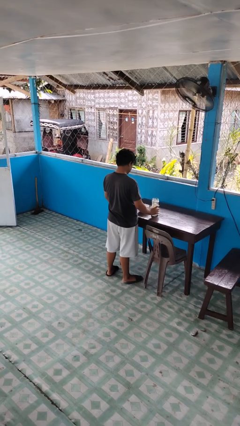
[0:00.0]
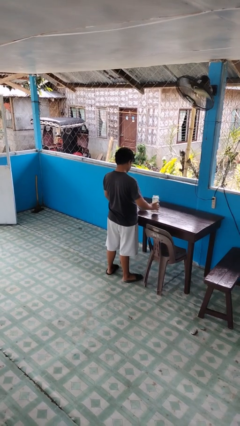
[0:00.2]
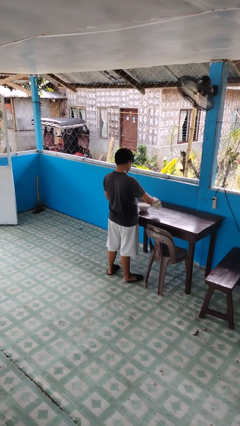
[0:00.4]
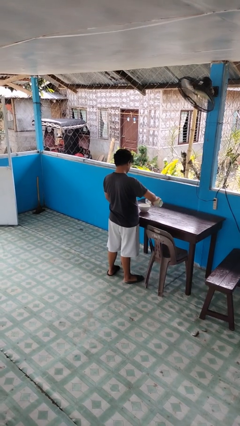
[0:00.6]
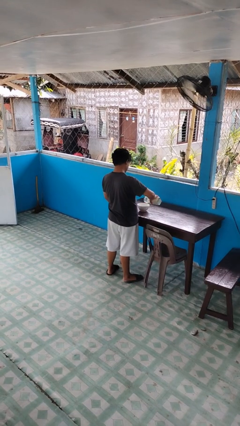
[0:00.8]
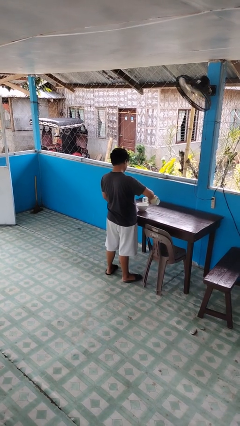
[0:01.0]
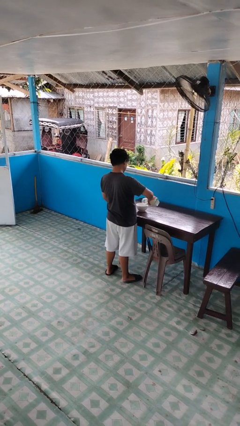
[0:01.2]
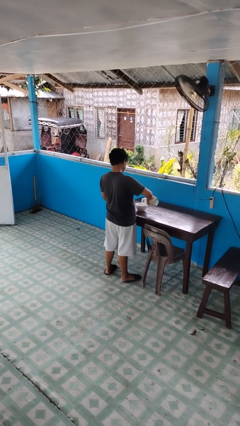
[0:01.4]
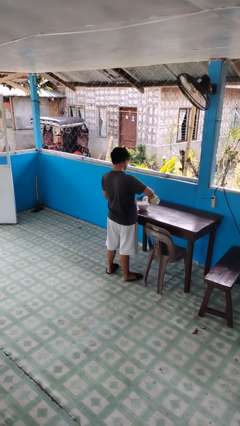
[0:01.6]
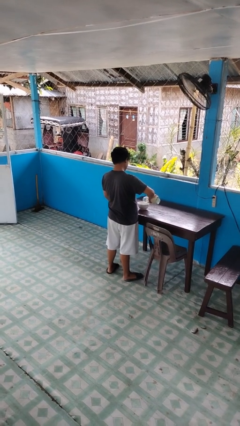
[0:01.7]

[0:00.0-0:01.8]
person pours into bowl

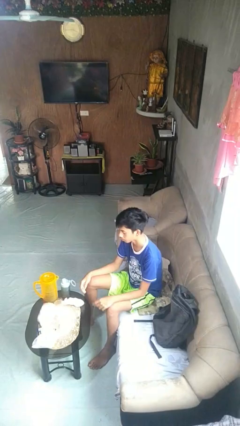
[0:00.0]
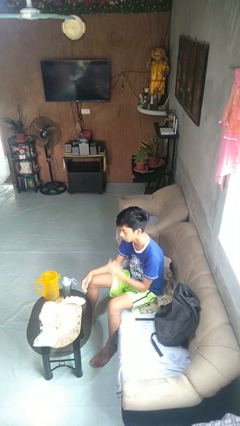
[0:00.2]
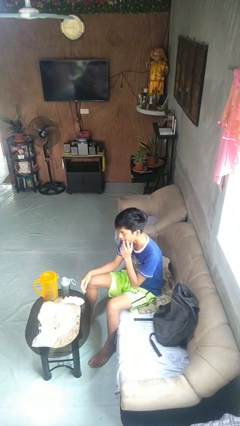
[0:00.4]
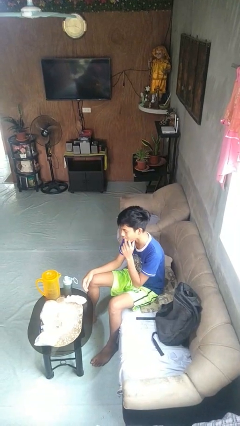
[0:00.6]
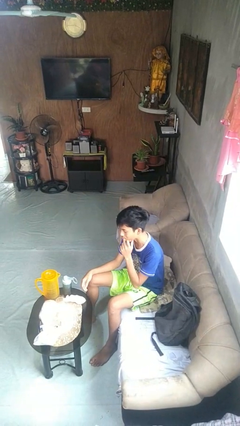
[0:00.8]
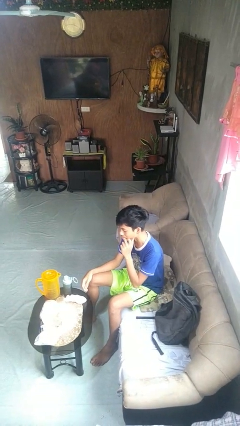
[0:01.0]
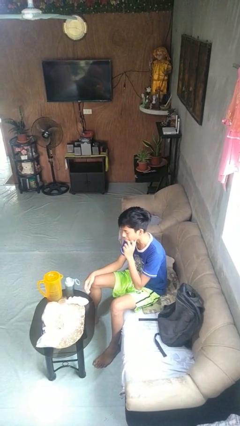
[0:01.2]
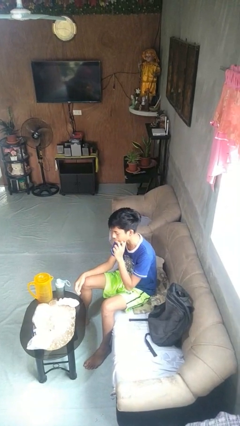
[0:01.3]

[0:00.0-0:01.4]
person licks fingers

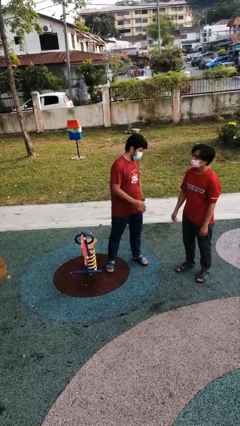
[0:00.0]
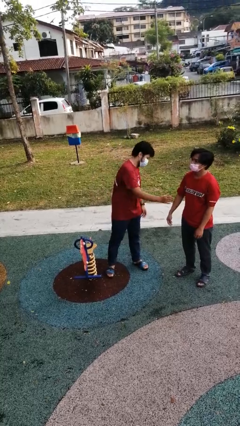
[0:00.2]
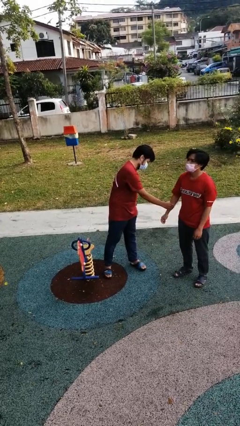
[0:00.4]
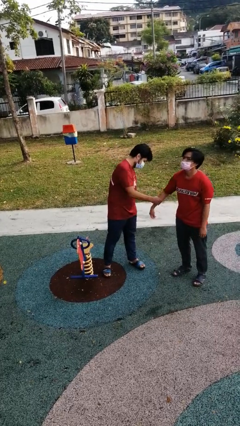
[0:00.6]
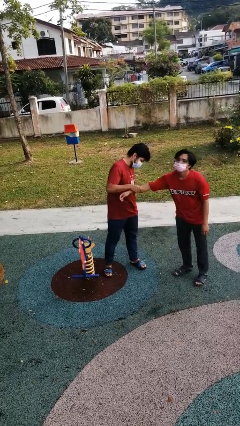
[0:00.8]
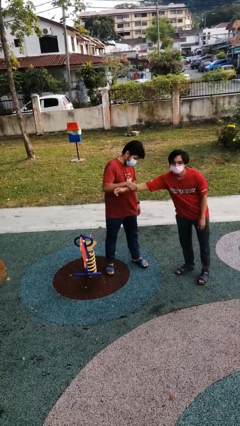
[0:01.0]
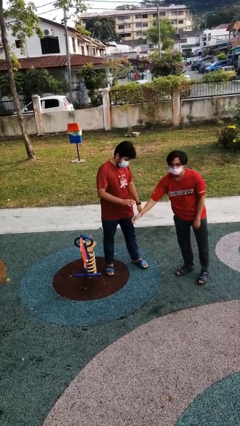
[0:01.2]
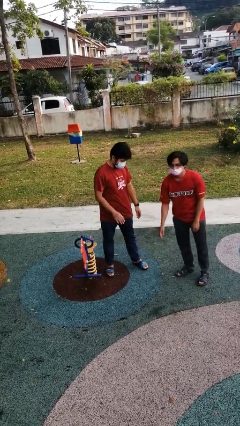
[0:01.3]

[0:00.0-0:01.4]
person grabs person by forearm

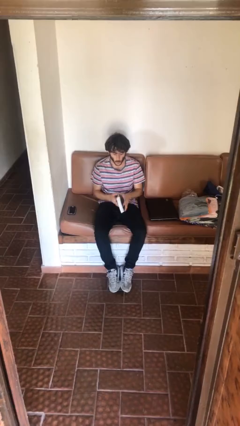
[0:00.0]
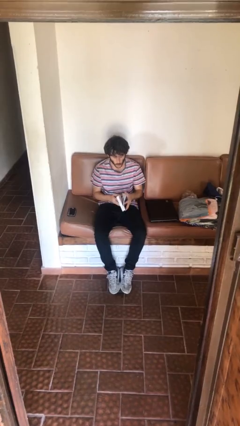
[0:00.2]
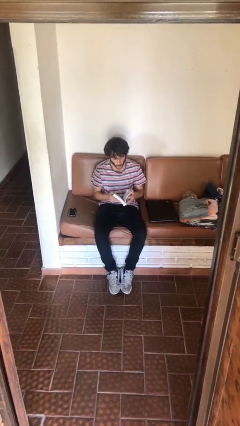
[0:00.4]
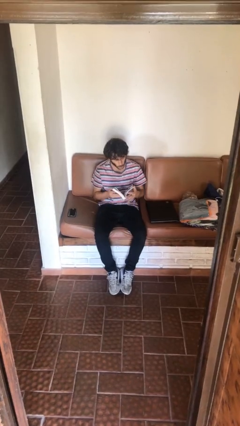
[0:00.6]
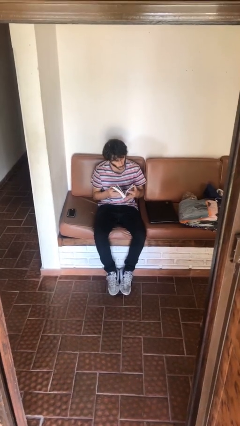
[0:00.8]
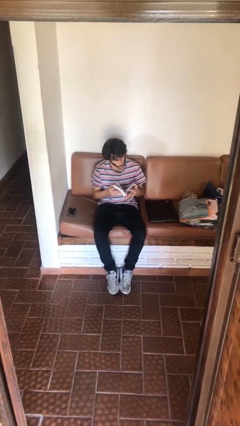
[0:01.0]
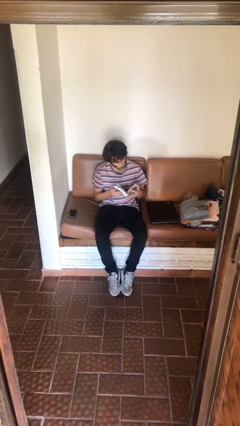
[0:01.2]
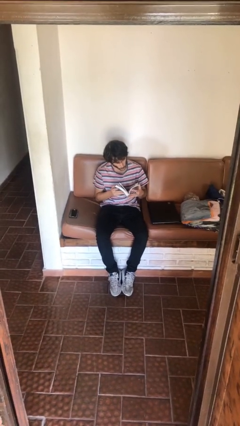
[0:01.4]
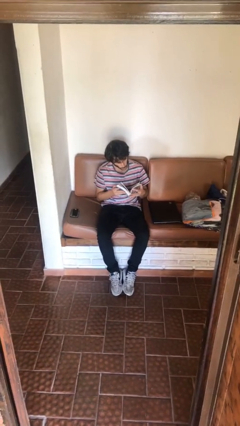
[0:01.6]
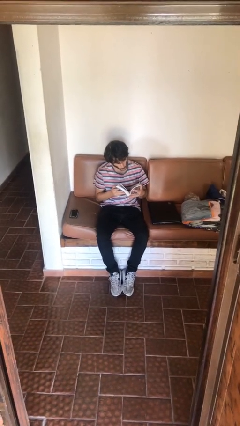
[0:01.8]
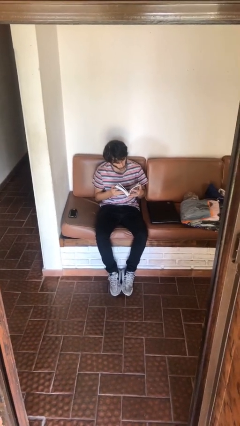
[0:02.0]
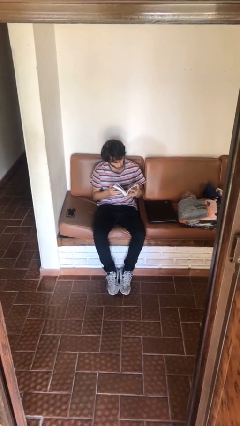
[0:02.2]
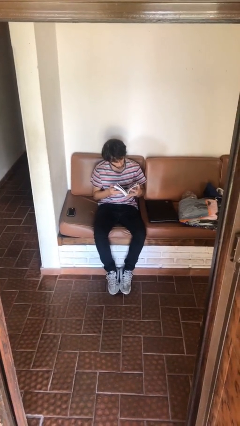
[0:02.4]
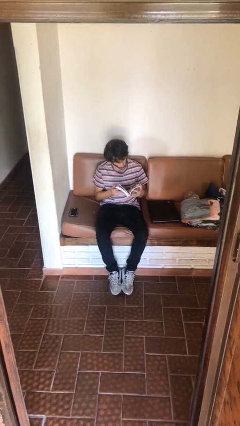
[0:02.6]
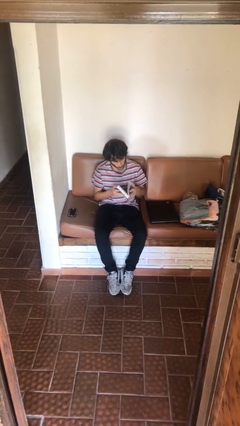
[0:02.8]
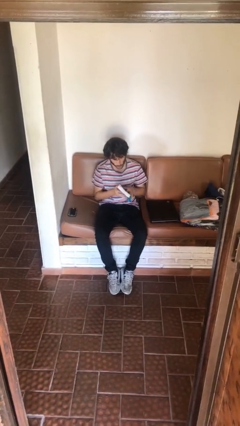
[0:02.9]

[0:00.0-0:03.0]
person reads document

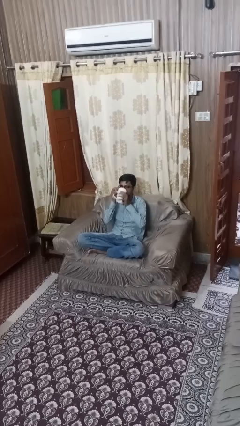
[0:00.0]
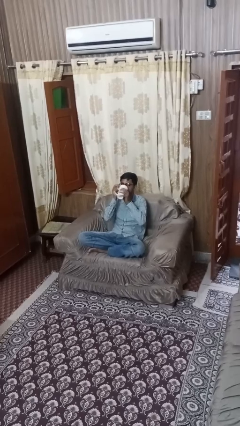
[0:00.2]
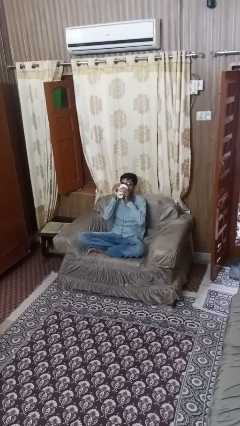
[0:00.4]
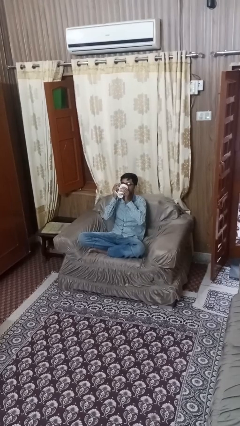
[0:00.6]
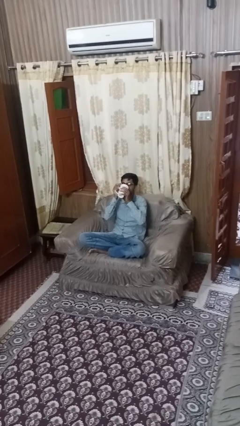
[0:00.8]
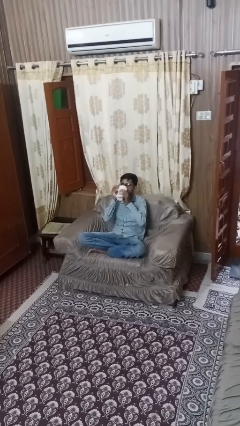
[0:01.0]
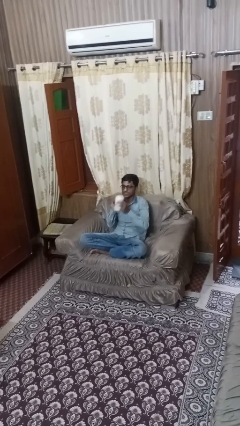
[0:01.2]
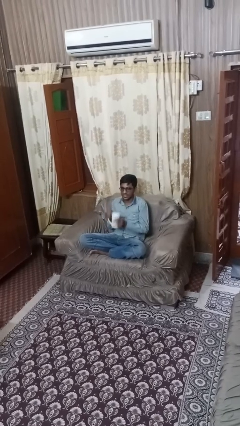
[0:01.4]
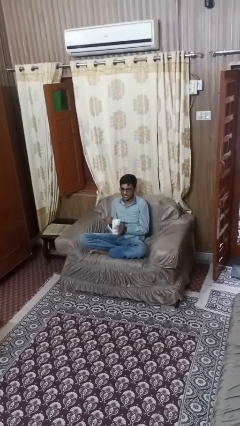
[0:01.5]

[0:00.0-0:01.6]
person drinks from mug

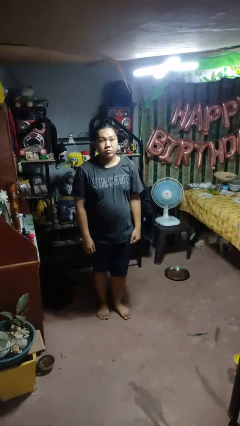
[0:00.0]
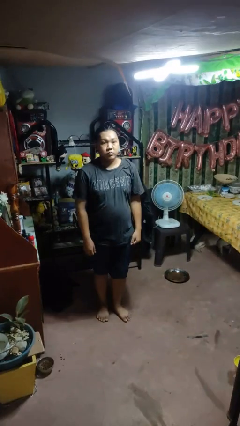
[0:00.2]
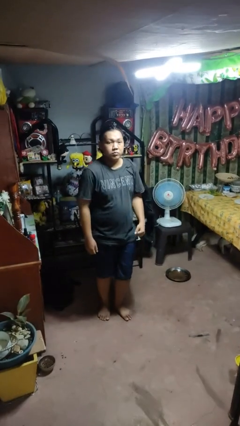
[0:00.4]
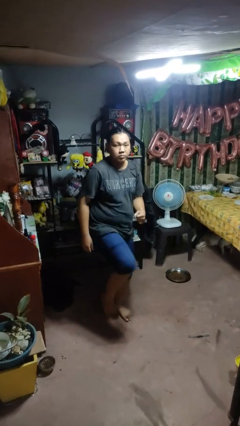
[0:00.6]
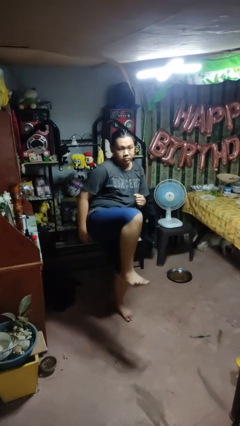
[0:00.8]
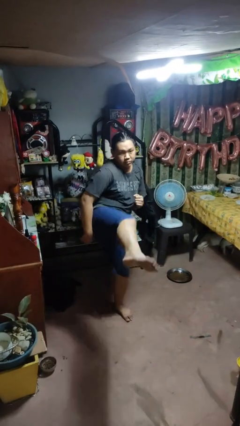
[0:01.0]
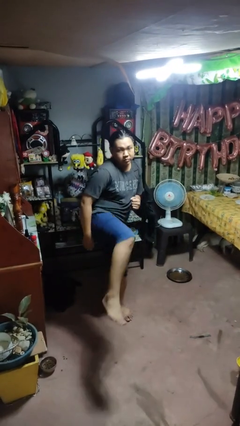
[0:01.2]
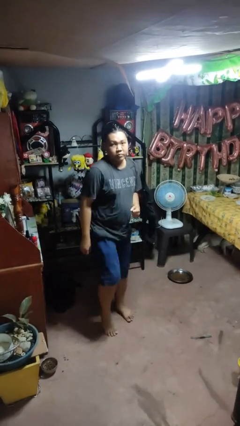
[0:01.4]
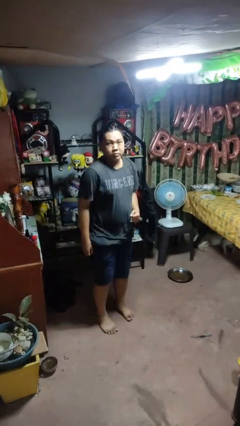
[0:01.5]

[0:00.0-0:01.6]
person karate kicks

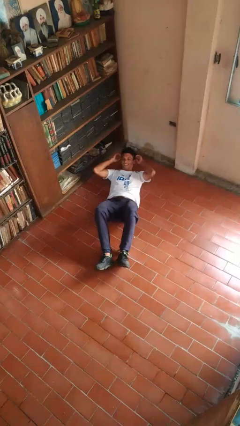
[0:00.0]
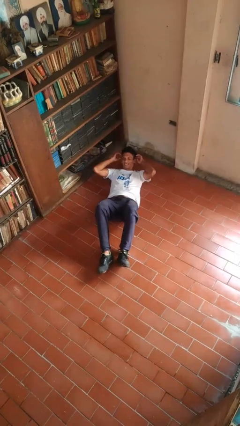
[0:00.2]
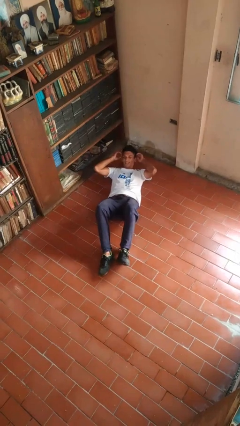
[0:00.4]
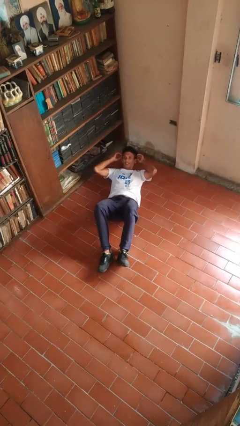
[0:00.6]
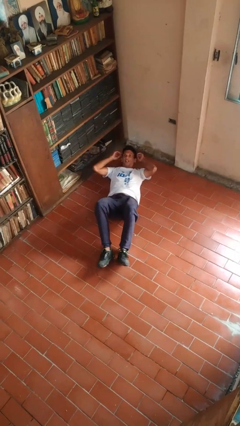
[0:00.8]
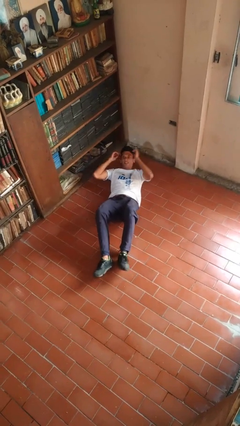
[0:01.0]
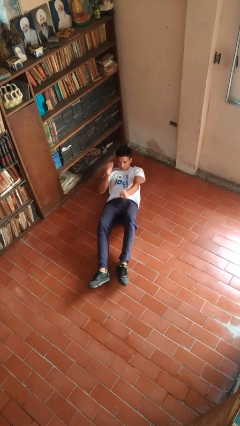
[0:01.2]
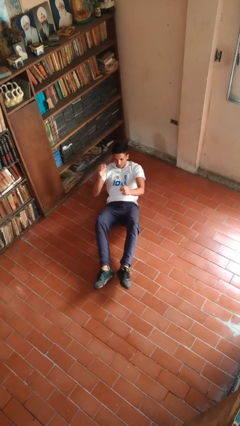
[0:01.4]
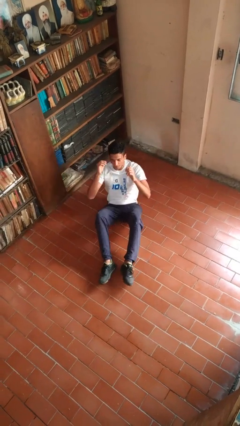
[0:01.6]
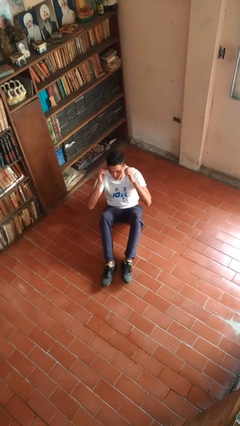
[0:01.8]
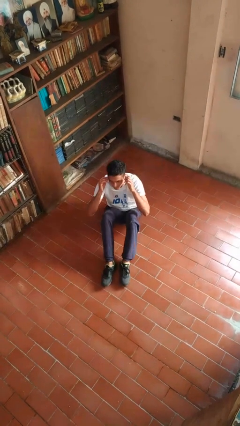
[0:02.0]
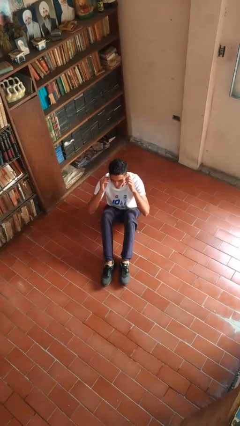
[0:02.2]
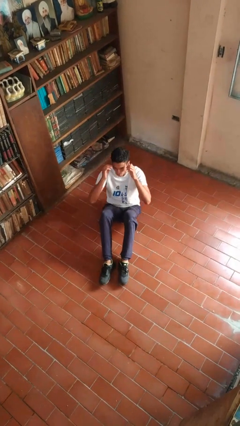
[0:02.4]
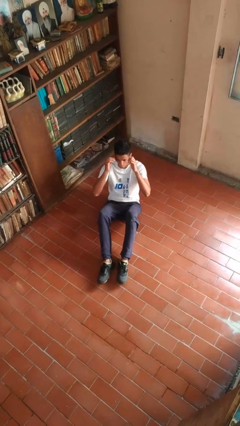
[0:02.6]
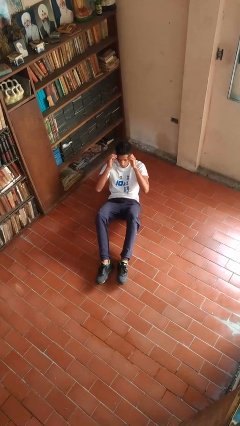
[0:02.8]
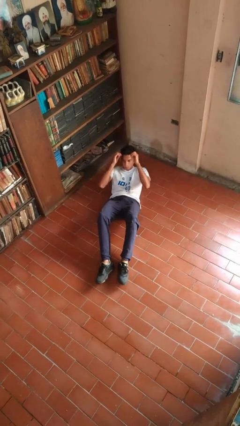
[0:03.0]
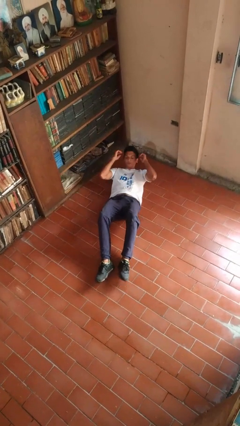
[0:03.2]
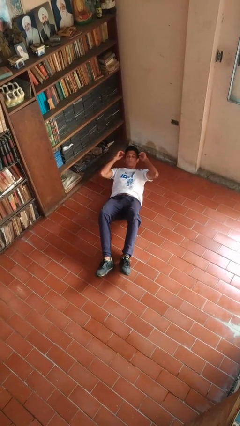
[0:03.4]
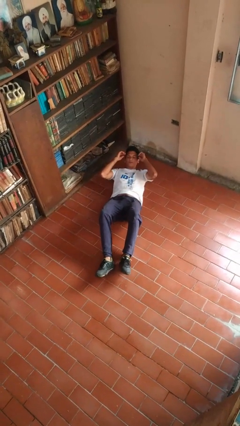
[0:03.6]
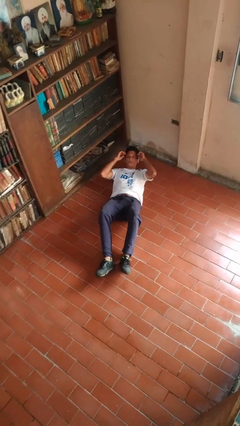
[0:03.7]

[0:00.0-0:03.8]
person exercises with situp

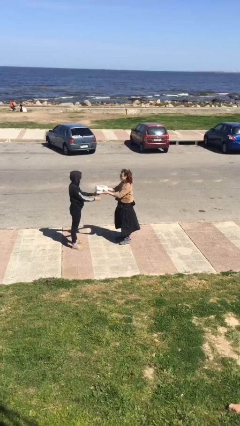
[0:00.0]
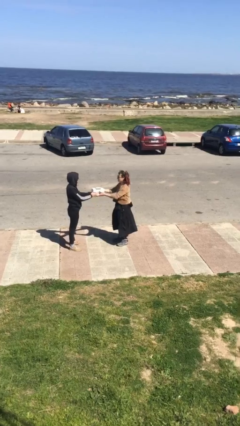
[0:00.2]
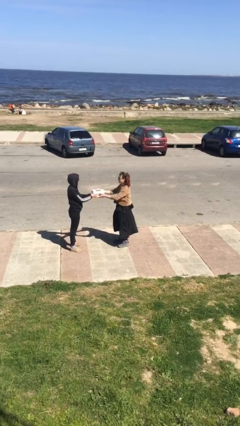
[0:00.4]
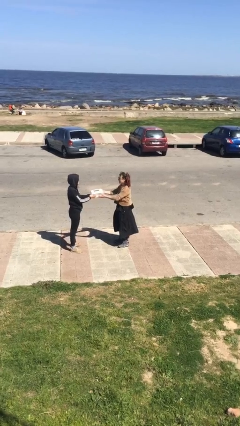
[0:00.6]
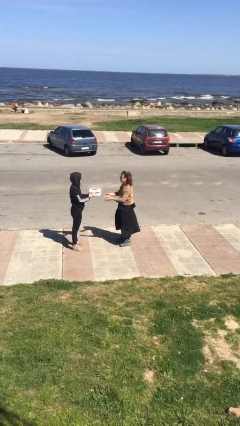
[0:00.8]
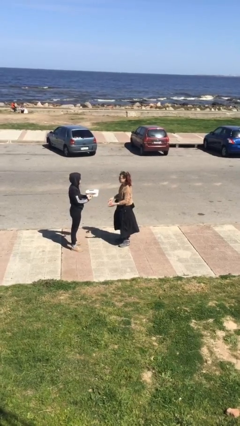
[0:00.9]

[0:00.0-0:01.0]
person transfers object to person

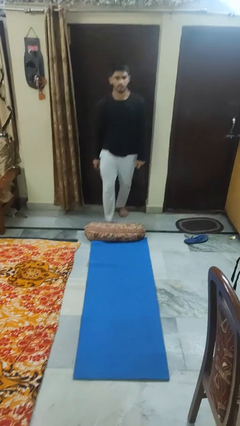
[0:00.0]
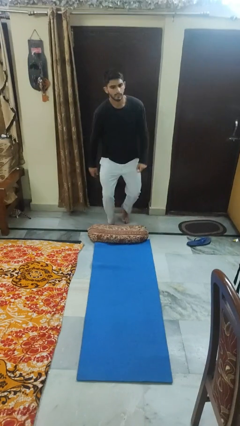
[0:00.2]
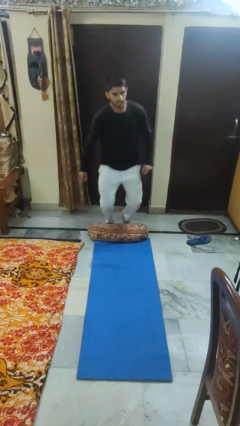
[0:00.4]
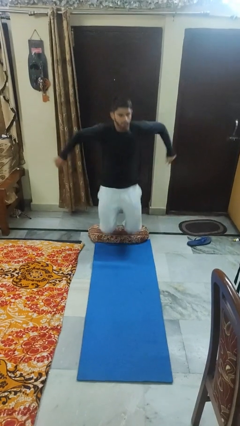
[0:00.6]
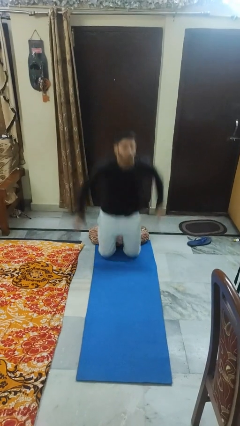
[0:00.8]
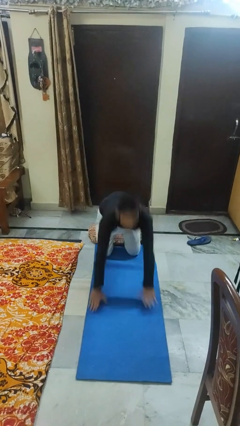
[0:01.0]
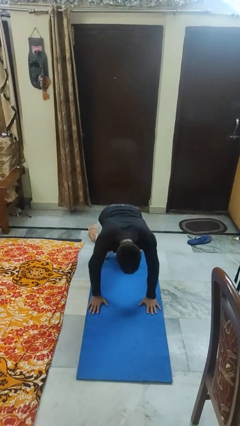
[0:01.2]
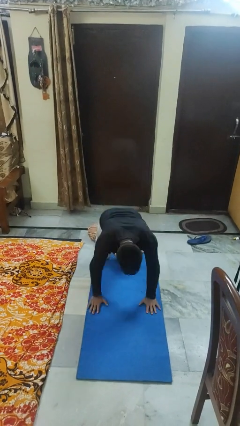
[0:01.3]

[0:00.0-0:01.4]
person trips on object on floor
